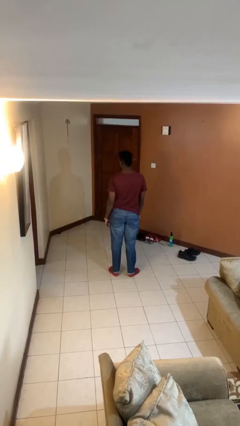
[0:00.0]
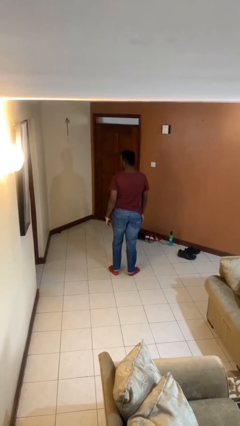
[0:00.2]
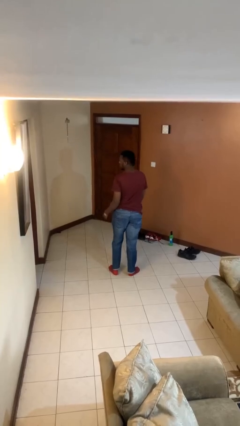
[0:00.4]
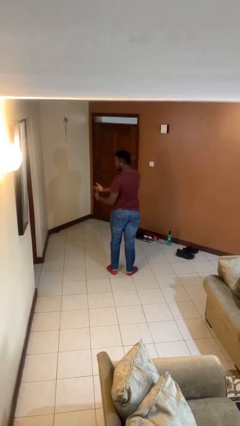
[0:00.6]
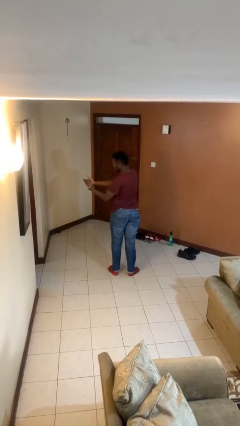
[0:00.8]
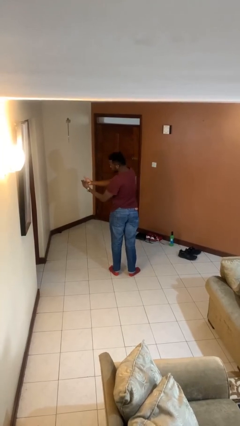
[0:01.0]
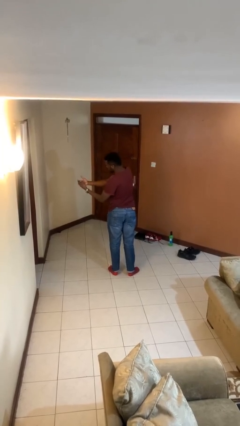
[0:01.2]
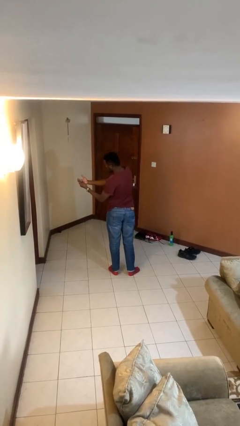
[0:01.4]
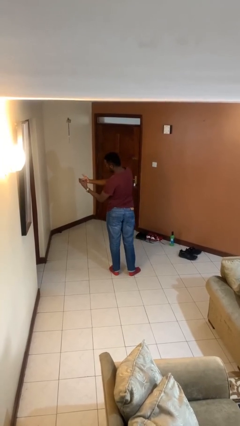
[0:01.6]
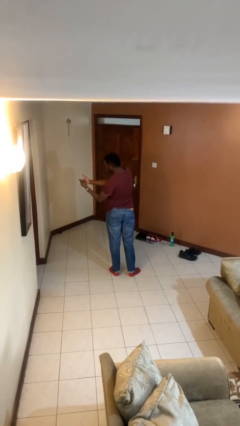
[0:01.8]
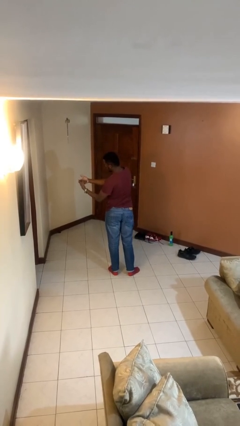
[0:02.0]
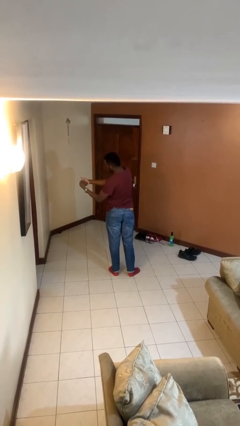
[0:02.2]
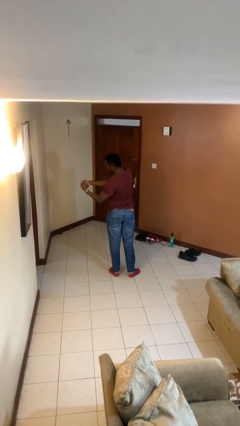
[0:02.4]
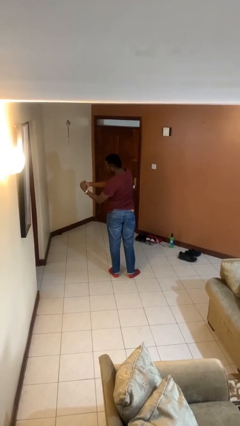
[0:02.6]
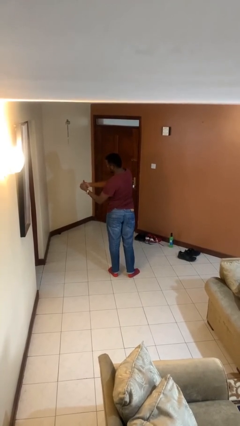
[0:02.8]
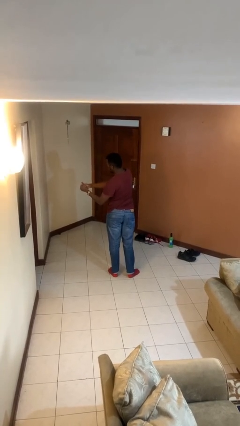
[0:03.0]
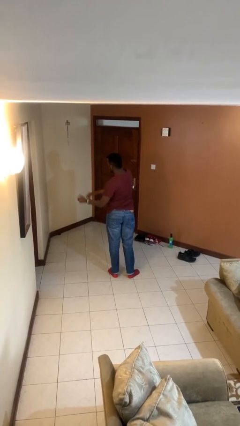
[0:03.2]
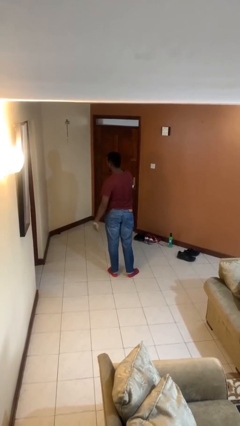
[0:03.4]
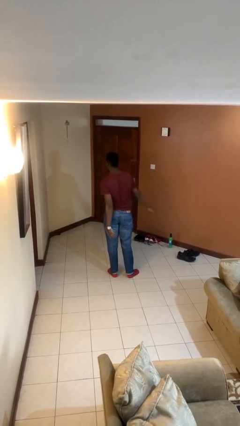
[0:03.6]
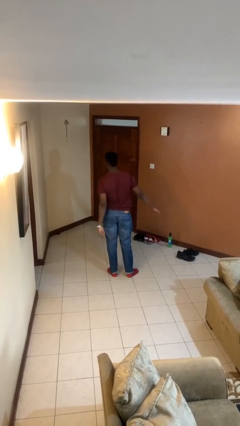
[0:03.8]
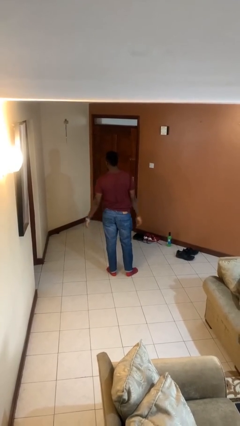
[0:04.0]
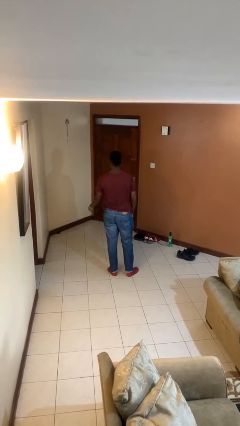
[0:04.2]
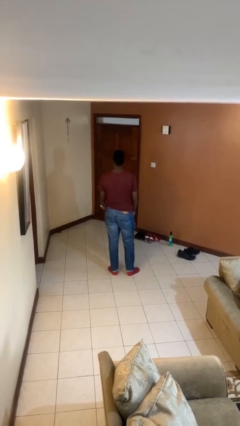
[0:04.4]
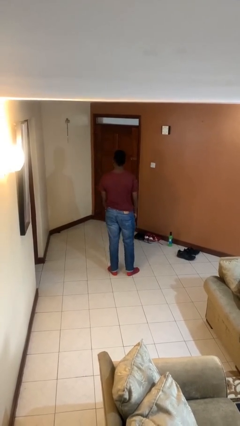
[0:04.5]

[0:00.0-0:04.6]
person cracks knuckles

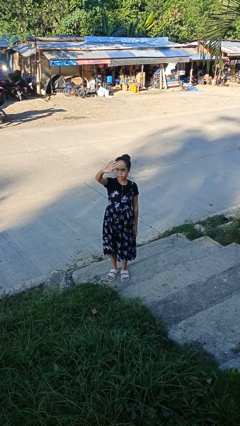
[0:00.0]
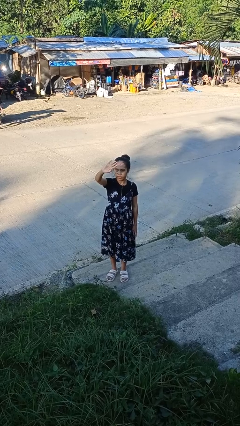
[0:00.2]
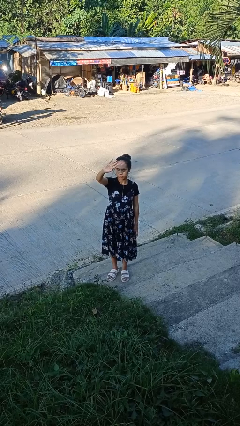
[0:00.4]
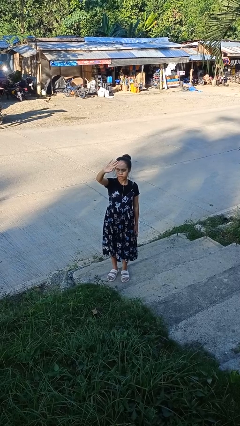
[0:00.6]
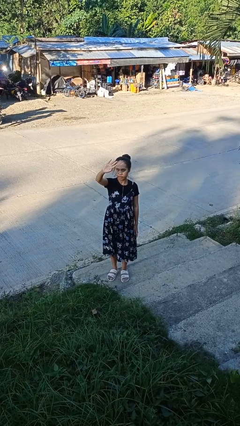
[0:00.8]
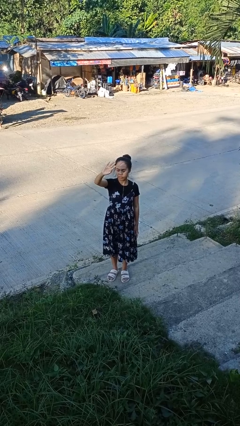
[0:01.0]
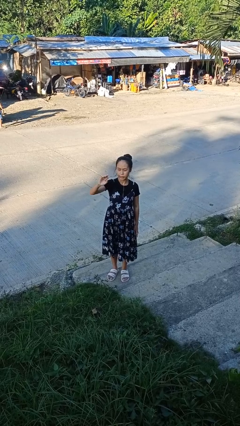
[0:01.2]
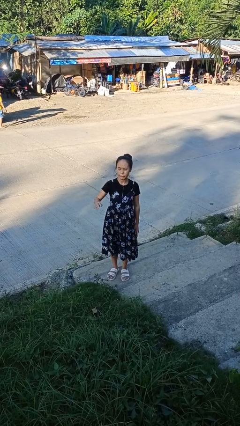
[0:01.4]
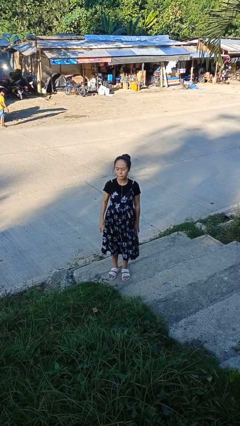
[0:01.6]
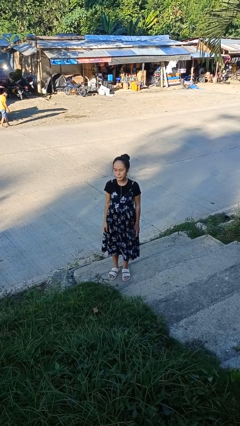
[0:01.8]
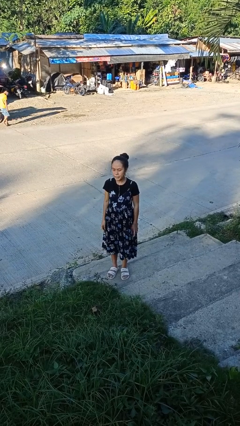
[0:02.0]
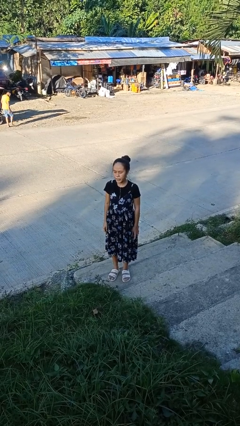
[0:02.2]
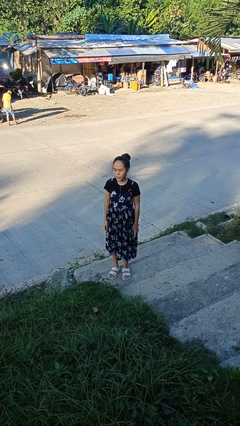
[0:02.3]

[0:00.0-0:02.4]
person shades eyes

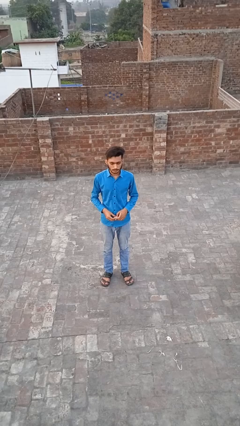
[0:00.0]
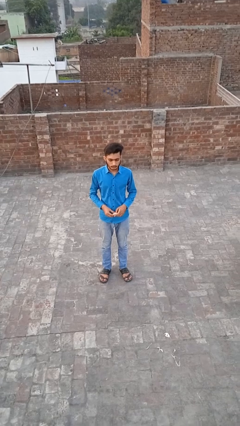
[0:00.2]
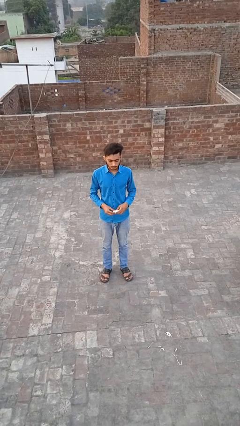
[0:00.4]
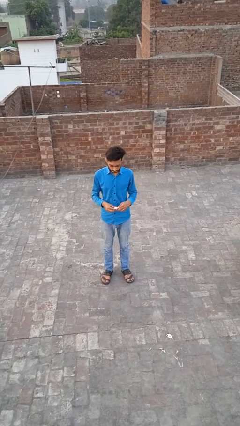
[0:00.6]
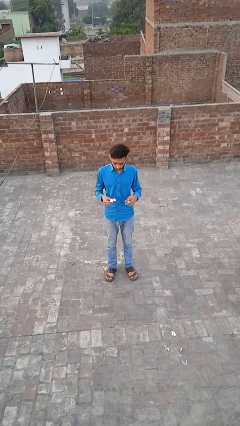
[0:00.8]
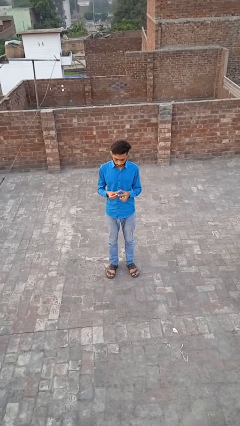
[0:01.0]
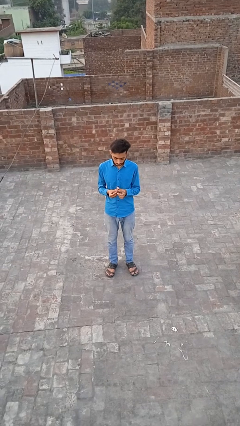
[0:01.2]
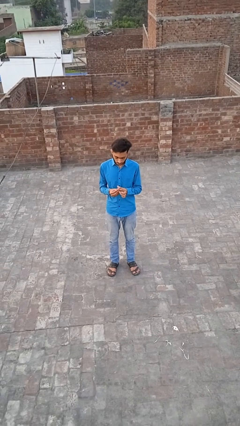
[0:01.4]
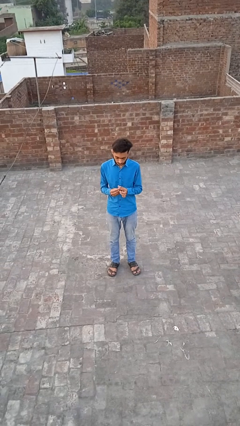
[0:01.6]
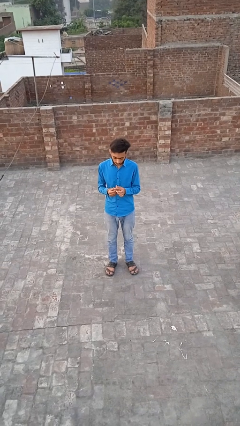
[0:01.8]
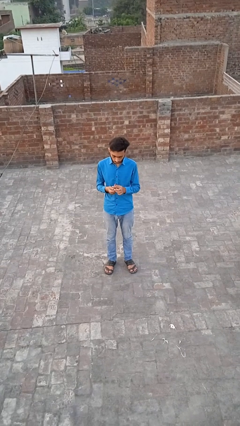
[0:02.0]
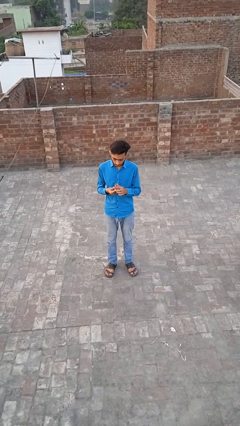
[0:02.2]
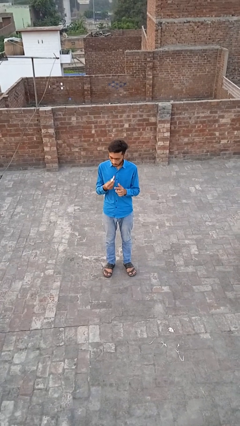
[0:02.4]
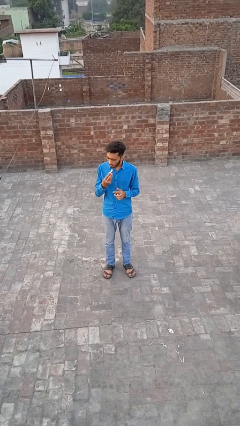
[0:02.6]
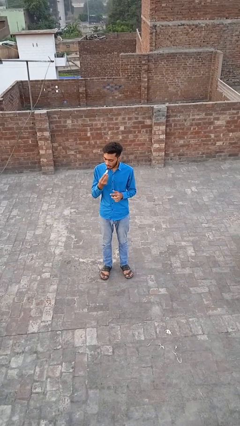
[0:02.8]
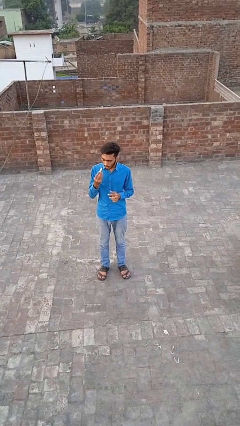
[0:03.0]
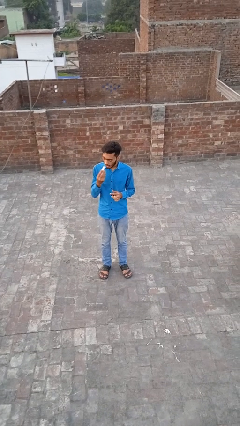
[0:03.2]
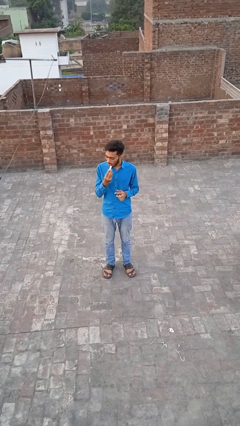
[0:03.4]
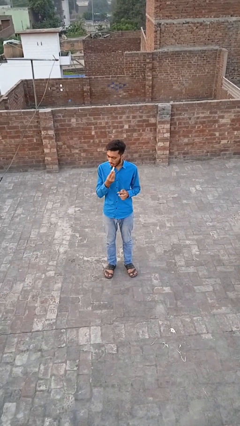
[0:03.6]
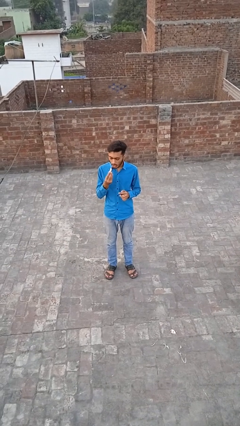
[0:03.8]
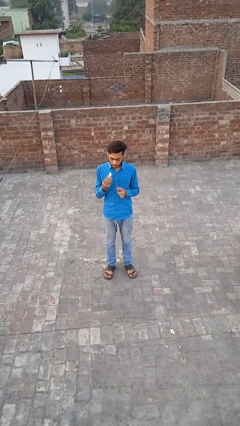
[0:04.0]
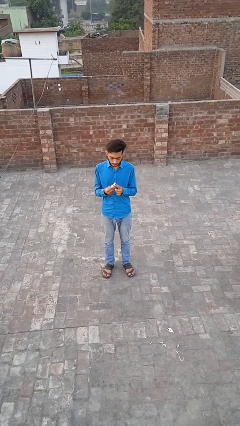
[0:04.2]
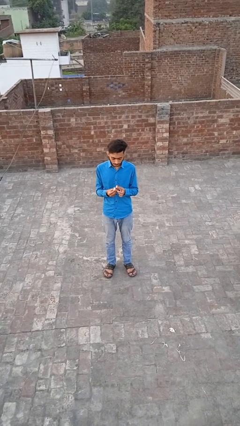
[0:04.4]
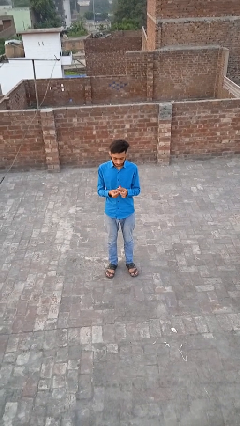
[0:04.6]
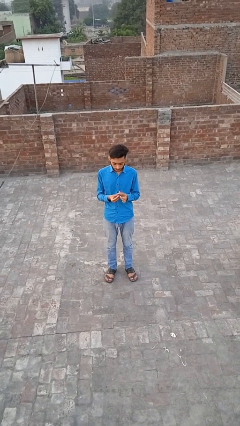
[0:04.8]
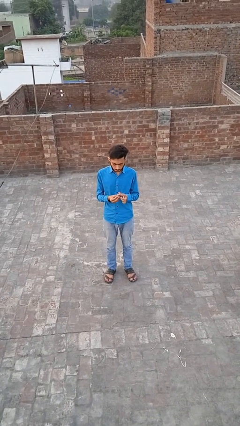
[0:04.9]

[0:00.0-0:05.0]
person applies lip makeup

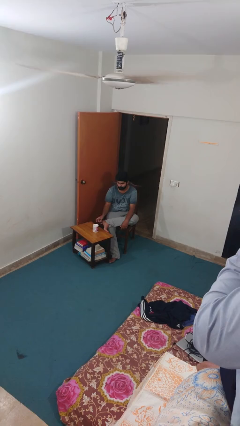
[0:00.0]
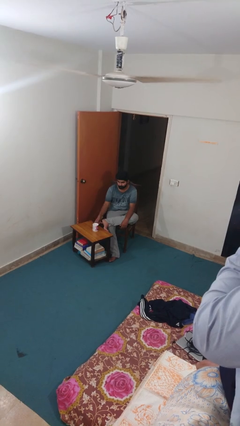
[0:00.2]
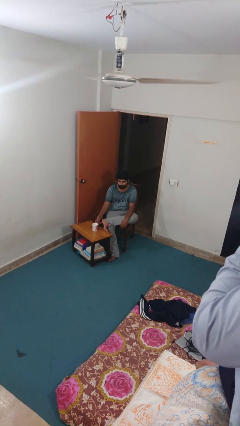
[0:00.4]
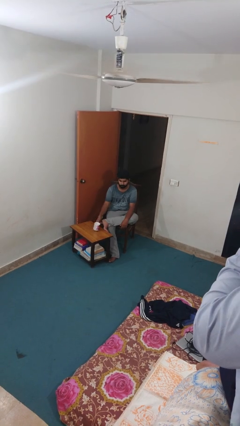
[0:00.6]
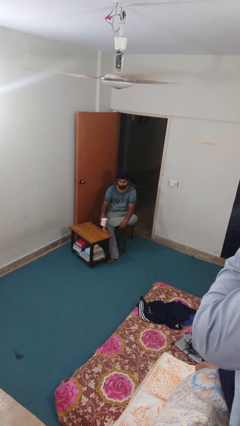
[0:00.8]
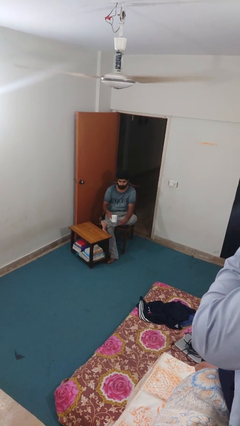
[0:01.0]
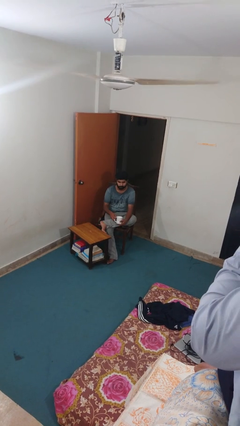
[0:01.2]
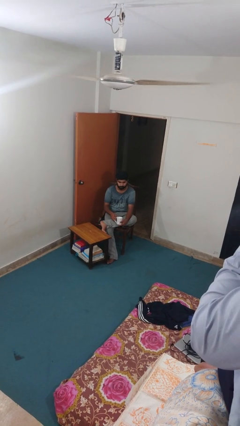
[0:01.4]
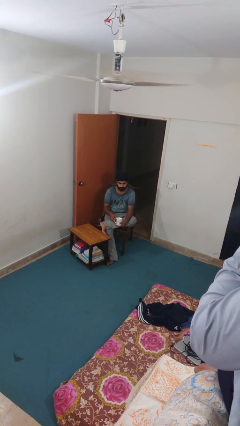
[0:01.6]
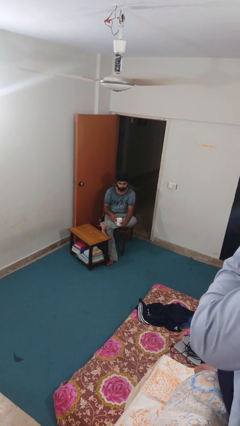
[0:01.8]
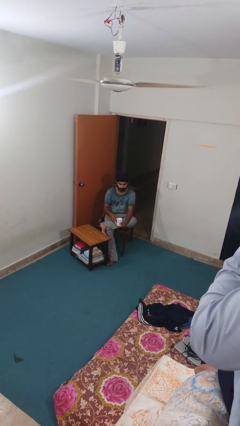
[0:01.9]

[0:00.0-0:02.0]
person picks up object from table

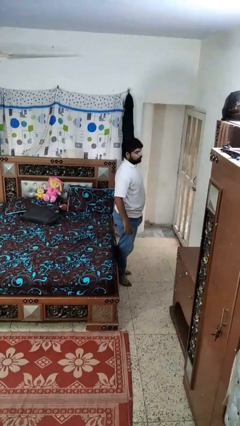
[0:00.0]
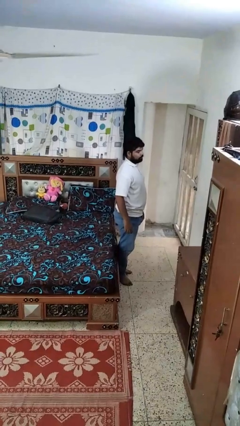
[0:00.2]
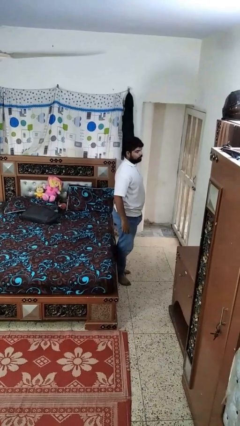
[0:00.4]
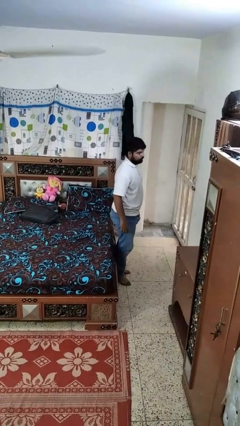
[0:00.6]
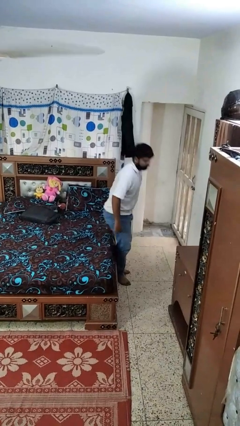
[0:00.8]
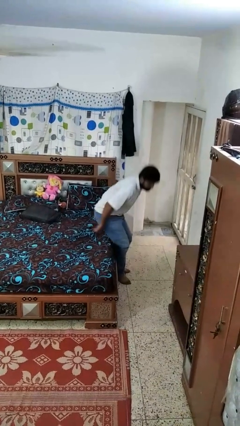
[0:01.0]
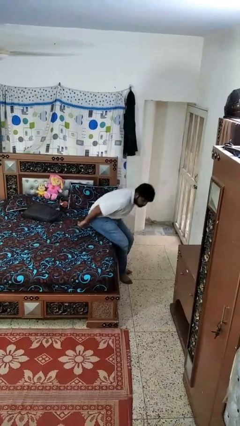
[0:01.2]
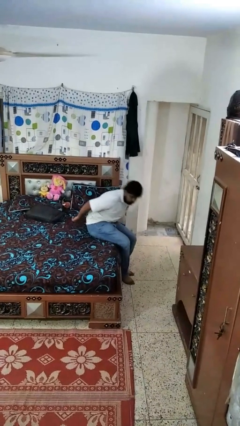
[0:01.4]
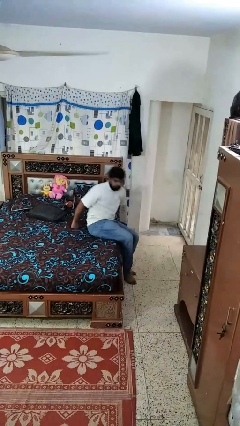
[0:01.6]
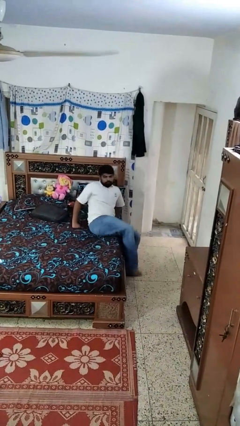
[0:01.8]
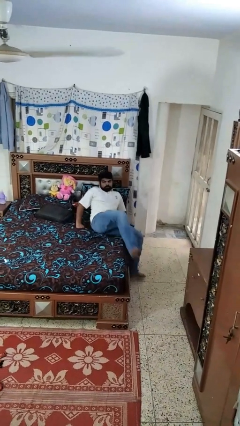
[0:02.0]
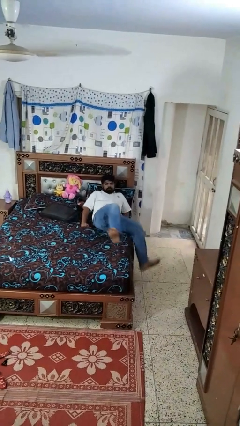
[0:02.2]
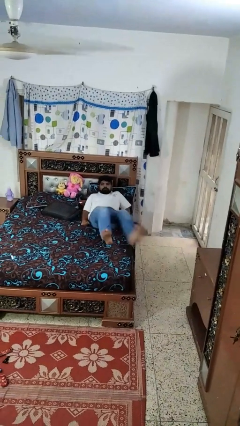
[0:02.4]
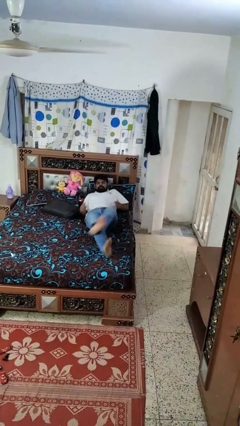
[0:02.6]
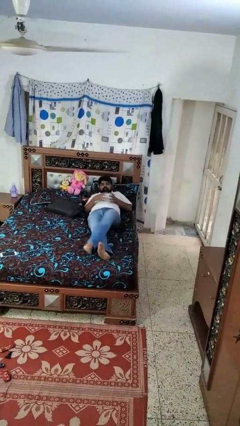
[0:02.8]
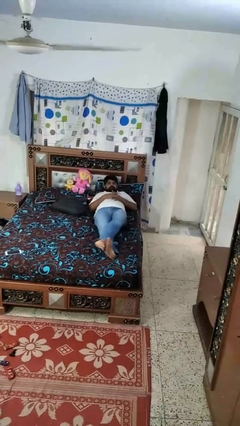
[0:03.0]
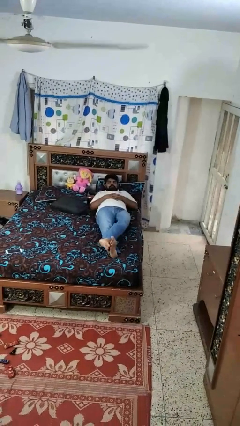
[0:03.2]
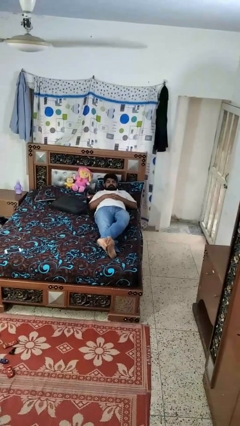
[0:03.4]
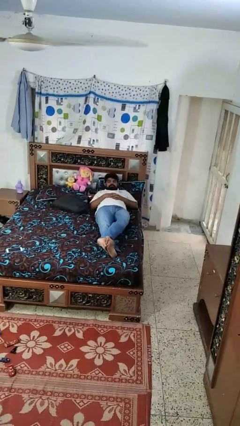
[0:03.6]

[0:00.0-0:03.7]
person lies down on bed
